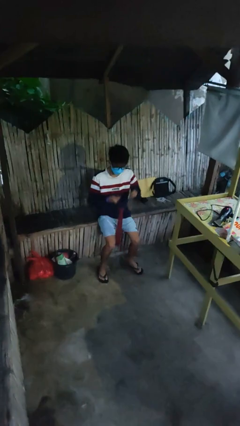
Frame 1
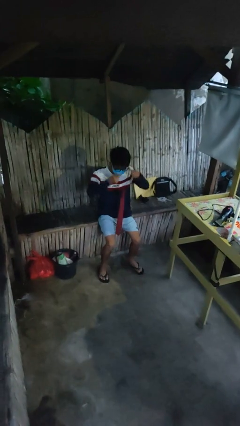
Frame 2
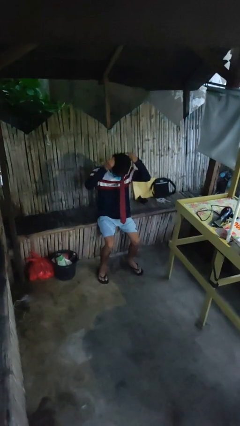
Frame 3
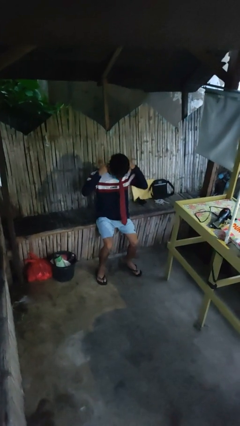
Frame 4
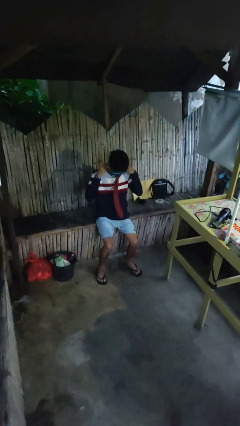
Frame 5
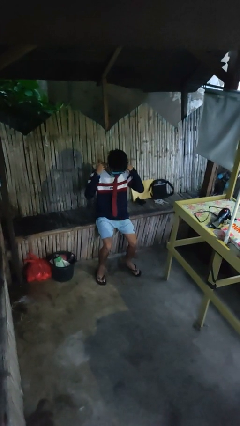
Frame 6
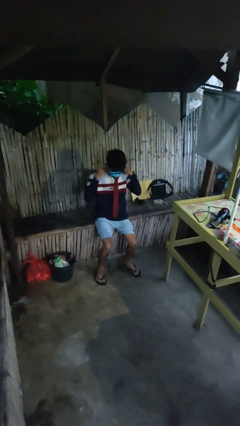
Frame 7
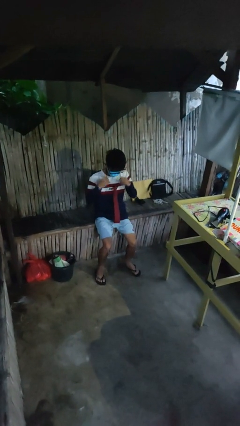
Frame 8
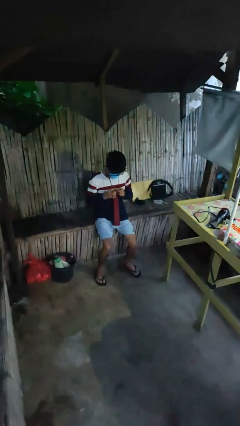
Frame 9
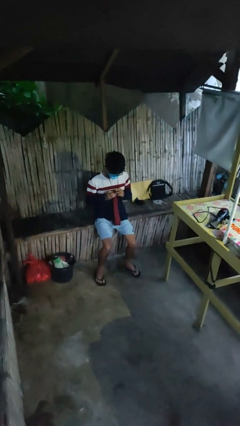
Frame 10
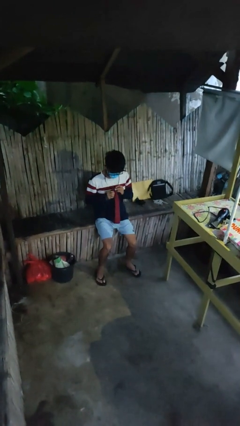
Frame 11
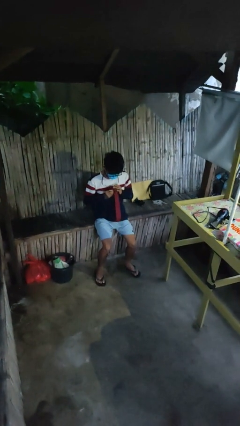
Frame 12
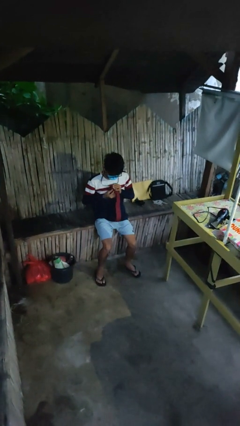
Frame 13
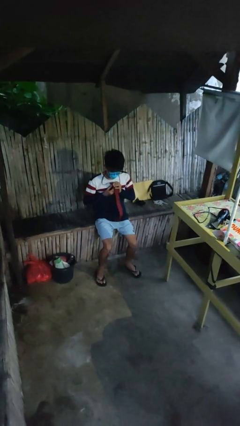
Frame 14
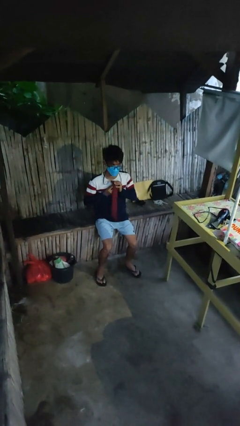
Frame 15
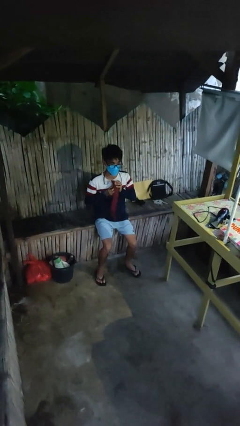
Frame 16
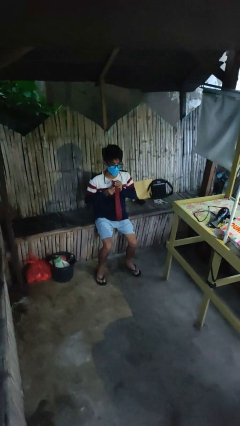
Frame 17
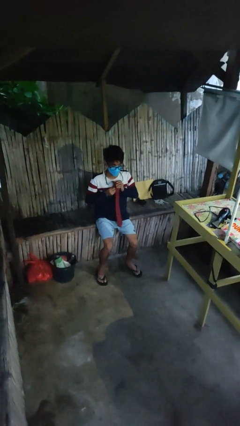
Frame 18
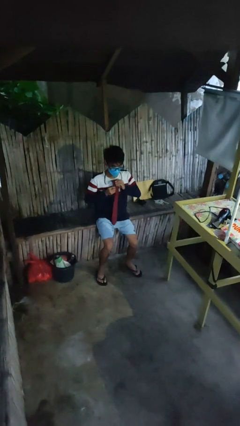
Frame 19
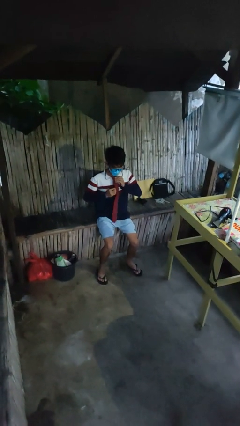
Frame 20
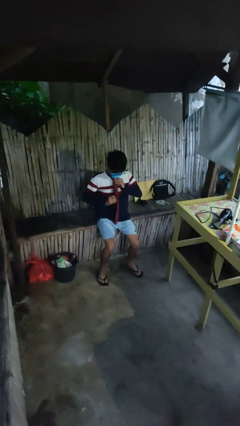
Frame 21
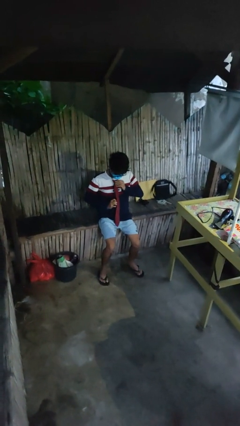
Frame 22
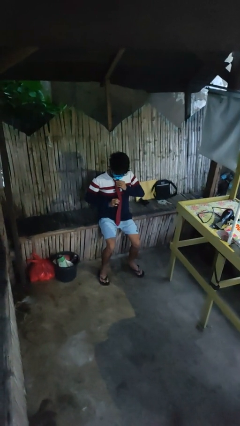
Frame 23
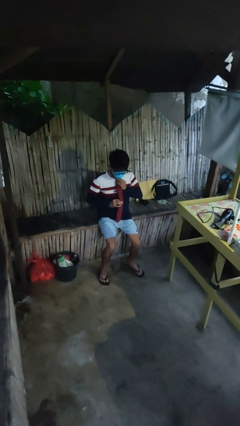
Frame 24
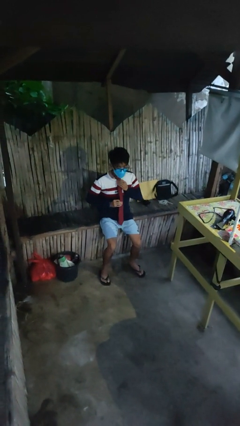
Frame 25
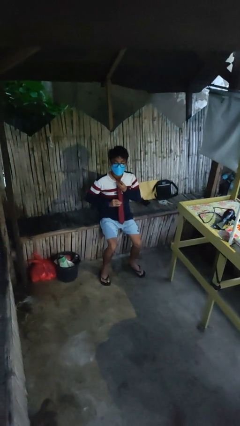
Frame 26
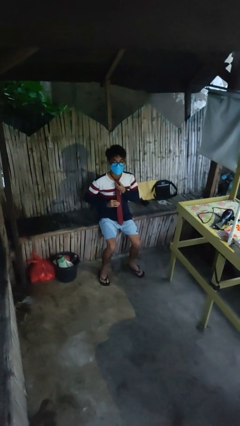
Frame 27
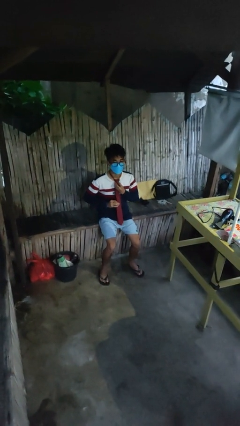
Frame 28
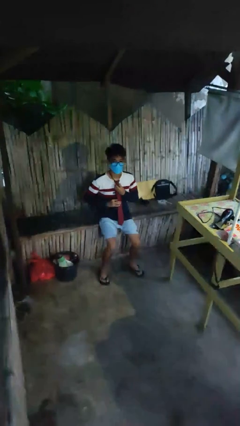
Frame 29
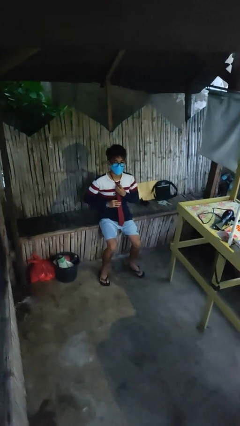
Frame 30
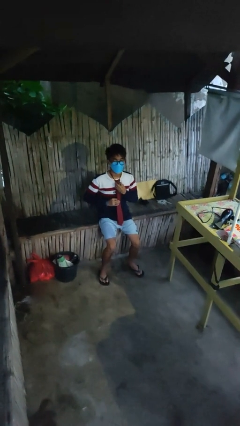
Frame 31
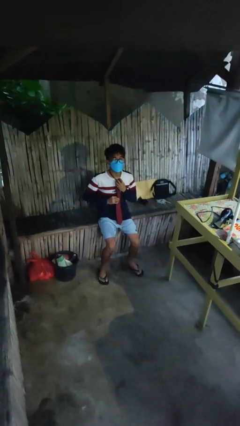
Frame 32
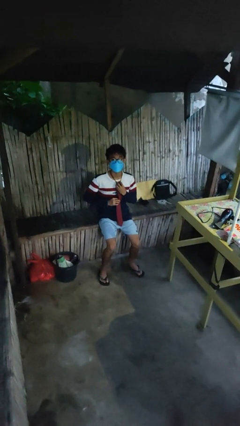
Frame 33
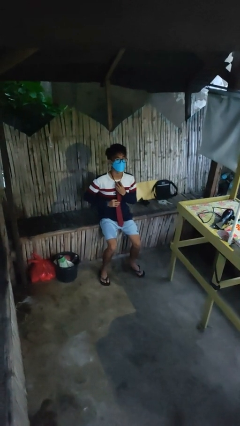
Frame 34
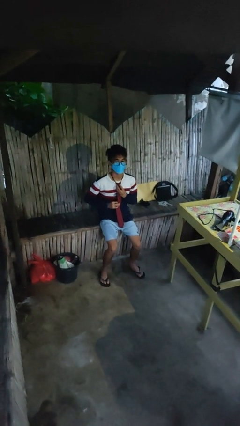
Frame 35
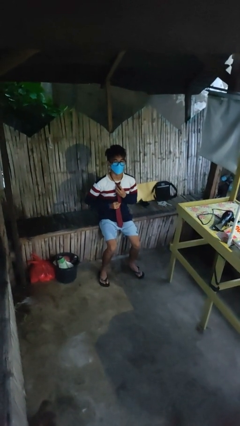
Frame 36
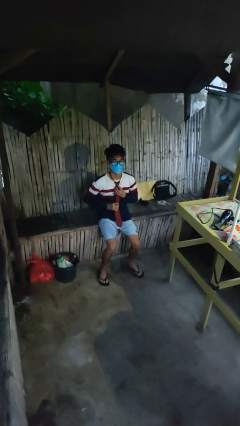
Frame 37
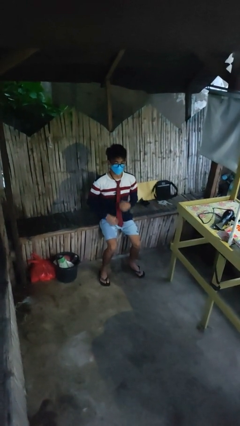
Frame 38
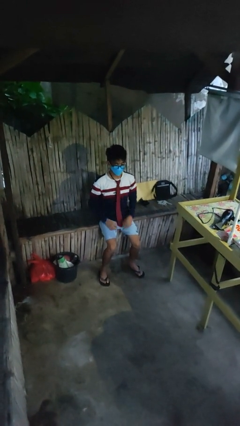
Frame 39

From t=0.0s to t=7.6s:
person puts on necktie

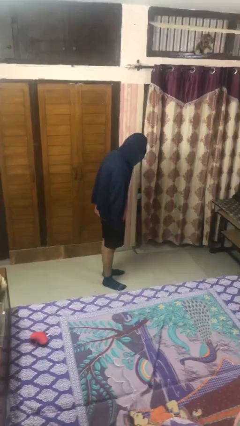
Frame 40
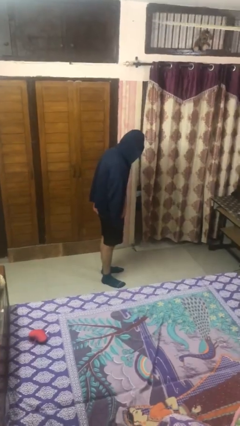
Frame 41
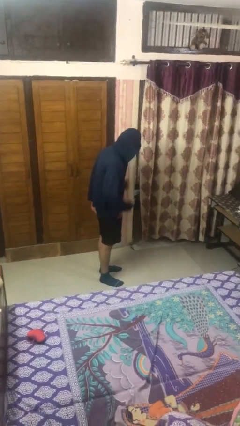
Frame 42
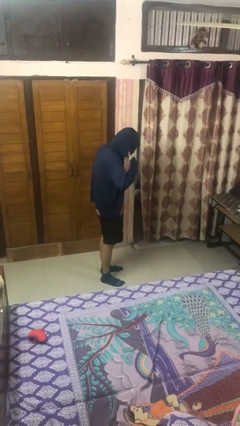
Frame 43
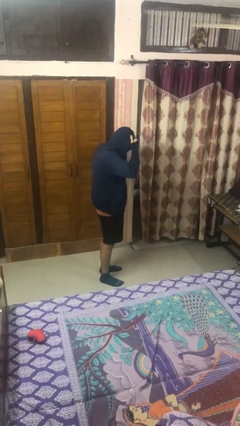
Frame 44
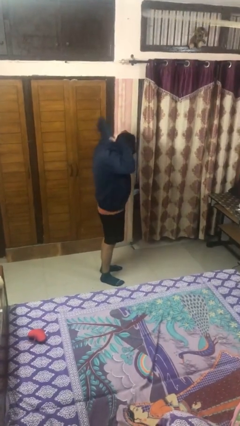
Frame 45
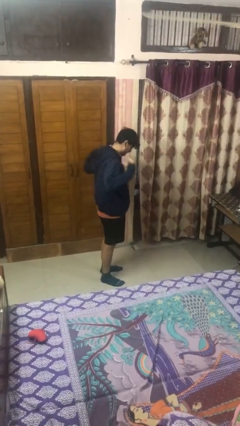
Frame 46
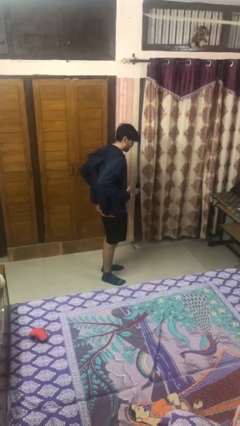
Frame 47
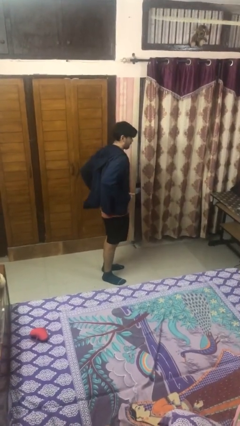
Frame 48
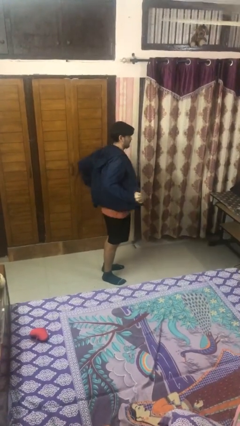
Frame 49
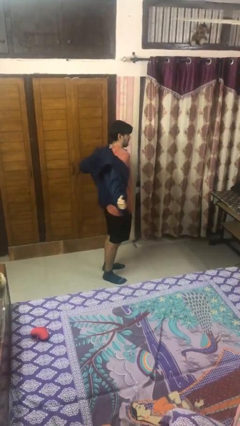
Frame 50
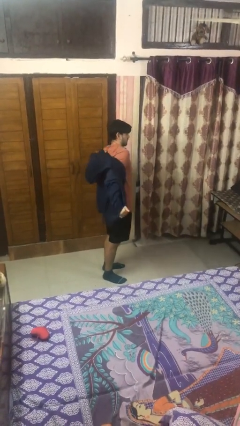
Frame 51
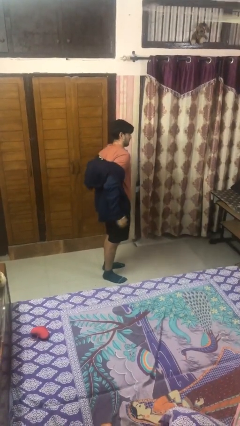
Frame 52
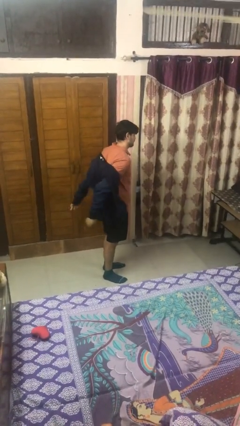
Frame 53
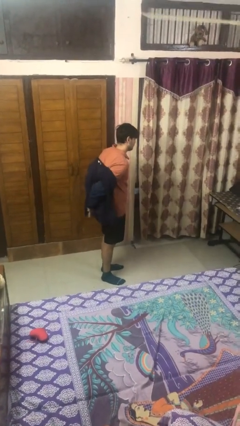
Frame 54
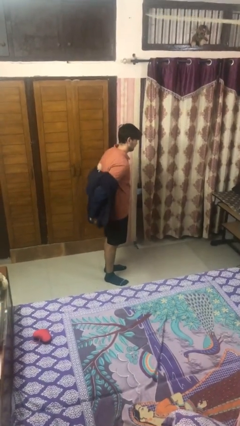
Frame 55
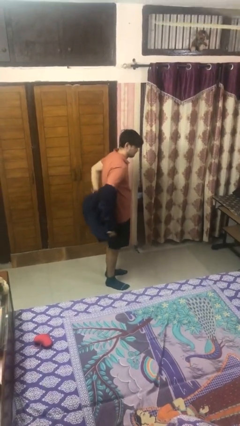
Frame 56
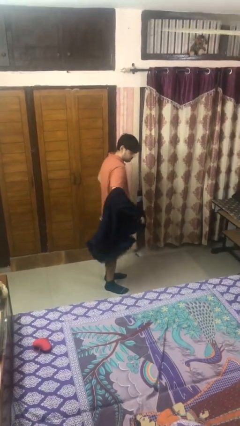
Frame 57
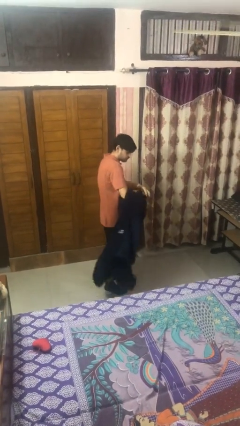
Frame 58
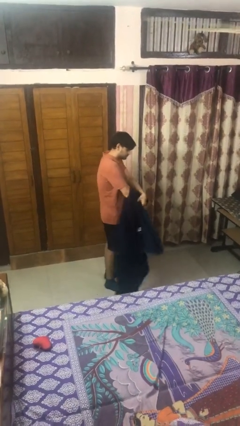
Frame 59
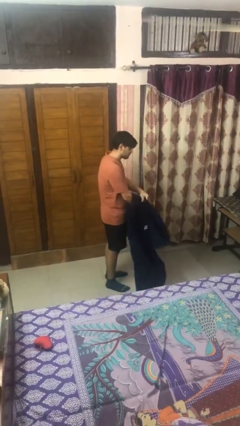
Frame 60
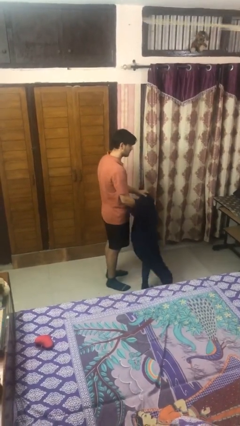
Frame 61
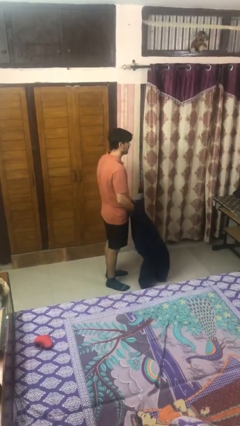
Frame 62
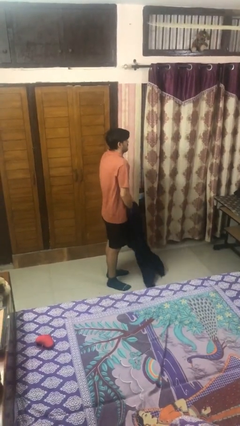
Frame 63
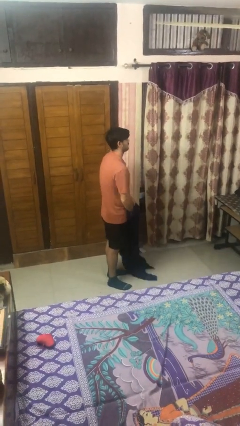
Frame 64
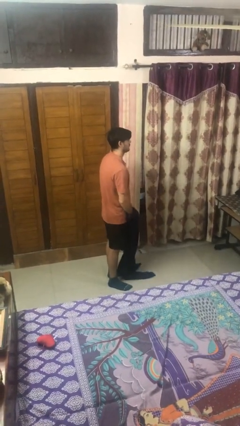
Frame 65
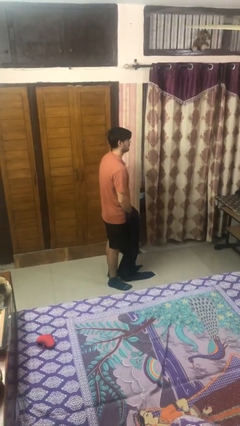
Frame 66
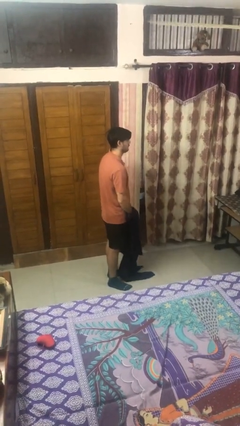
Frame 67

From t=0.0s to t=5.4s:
person takes off hoodie

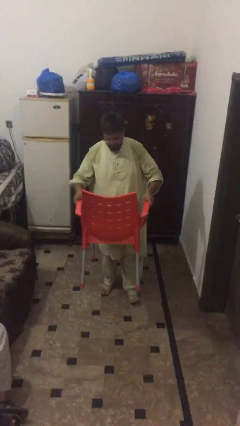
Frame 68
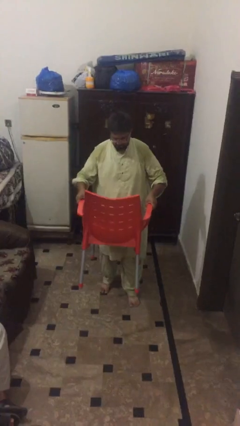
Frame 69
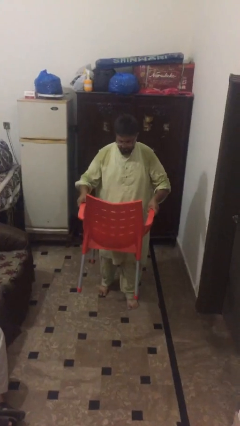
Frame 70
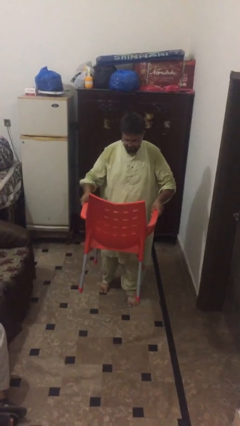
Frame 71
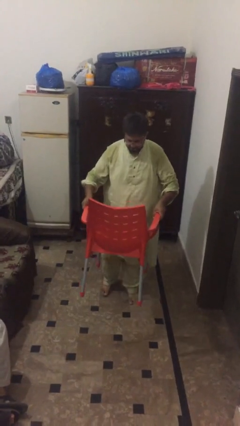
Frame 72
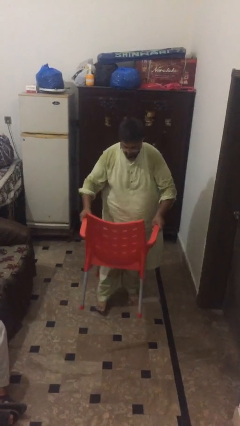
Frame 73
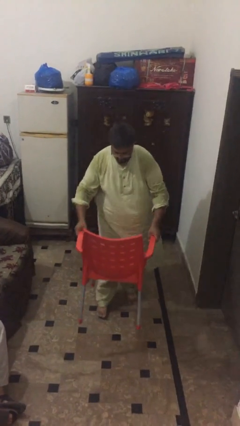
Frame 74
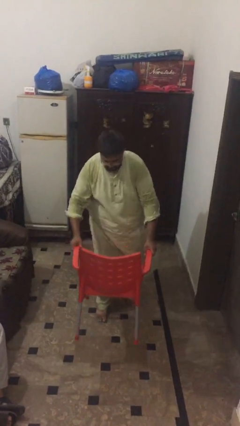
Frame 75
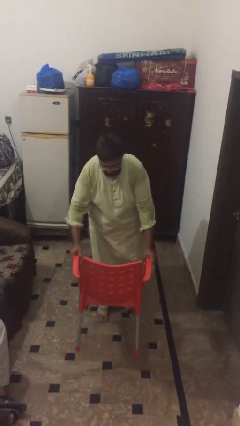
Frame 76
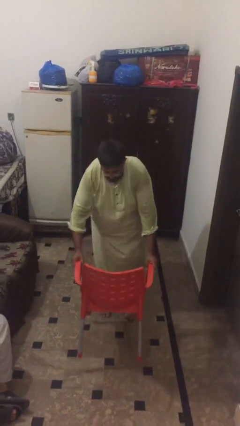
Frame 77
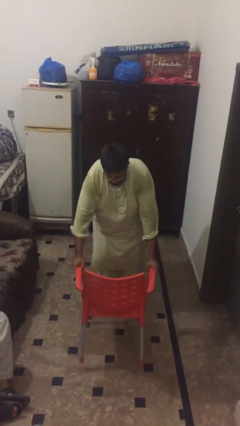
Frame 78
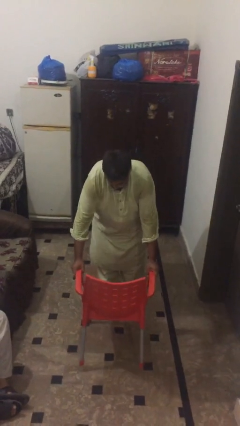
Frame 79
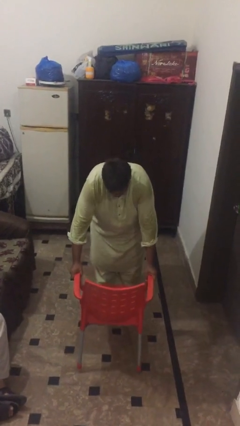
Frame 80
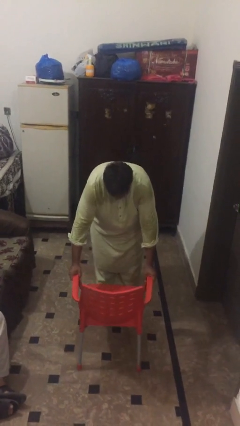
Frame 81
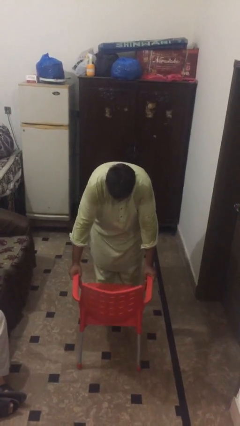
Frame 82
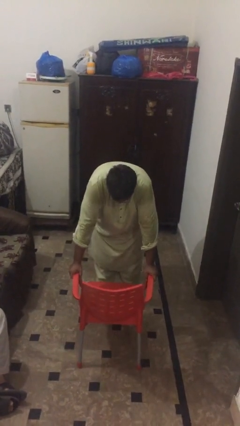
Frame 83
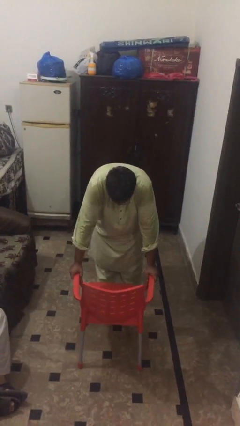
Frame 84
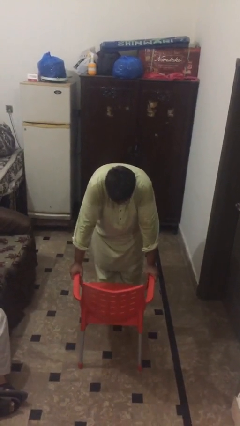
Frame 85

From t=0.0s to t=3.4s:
person puts down object on floor

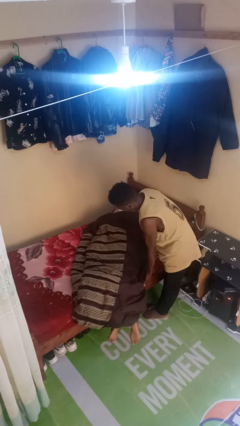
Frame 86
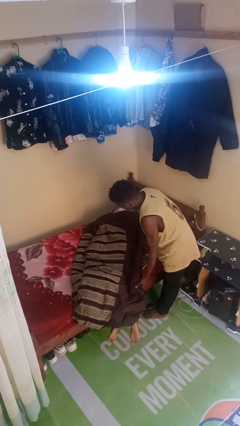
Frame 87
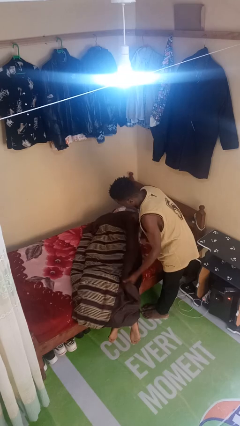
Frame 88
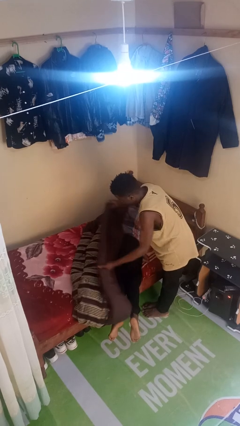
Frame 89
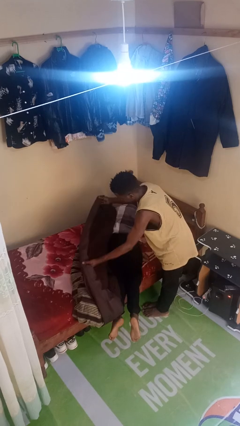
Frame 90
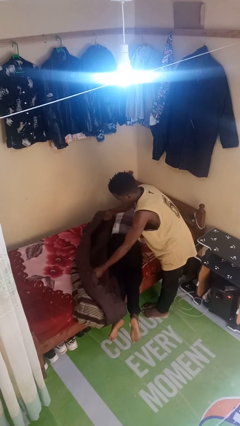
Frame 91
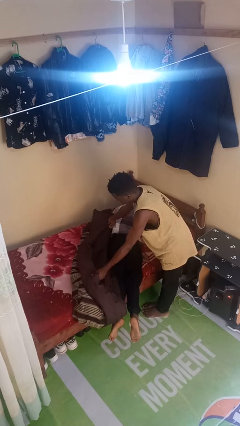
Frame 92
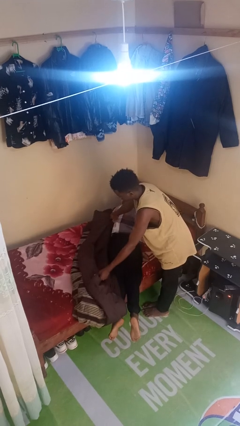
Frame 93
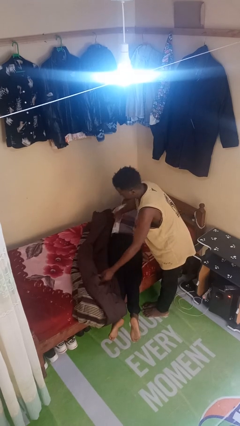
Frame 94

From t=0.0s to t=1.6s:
person uncovers friend with blanket
